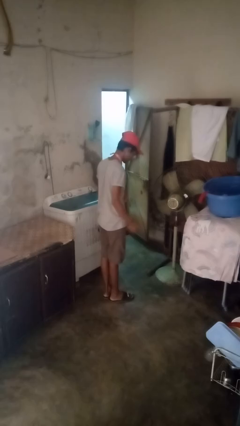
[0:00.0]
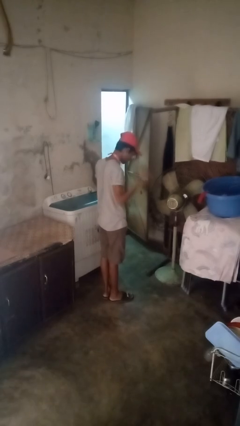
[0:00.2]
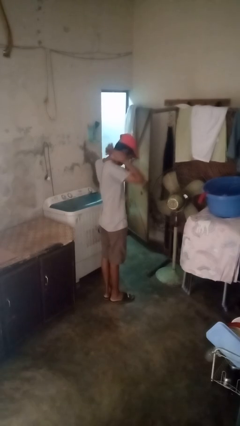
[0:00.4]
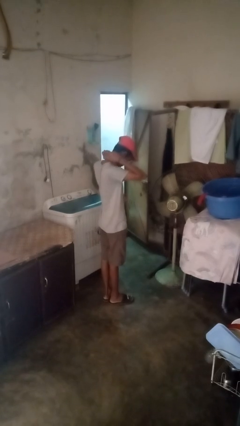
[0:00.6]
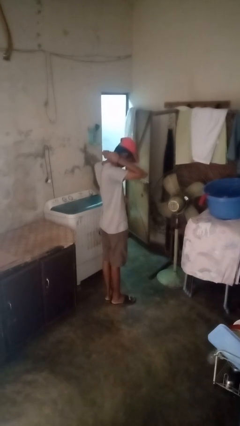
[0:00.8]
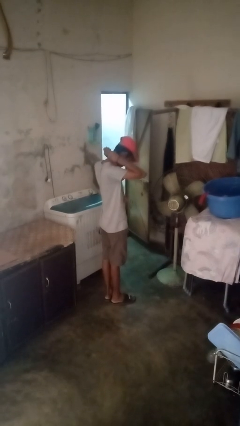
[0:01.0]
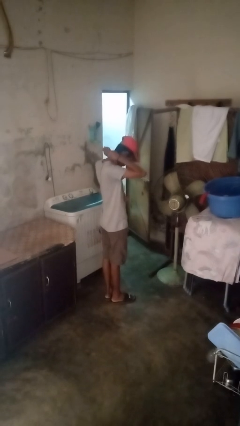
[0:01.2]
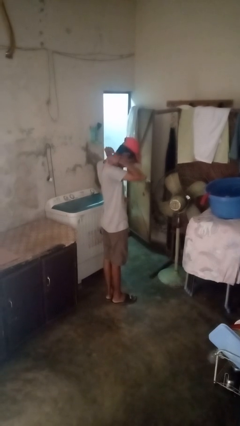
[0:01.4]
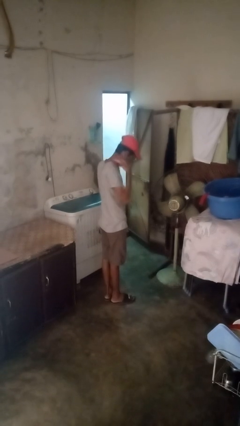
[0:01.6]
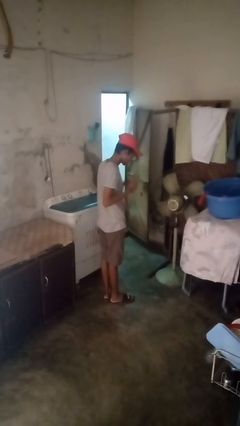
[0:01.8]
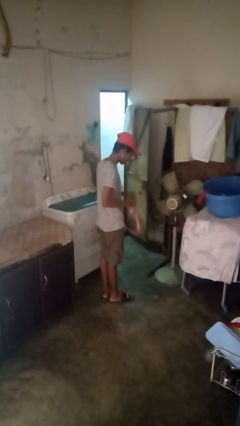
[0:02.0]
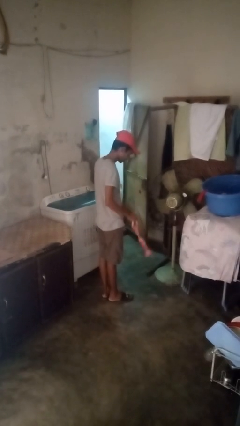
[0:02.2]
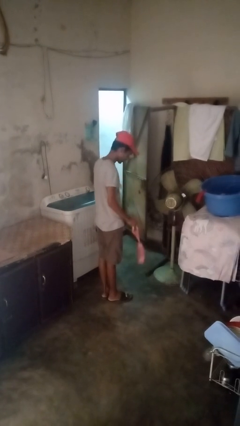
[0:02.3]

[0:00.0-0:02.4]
person takes off necktie

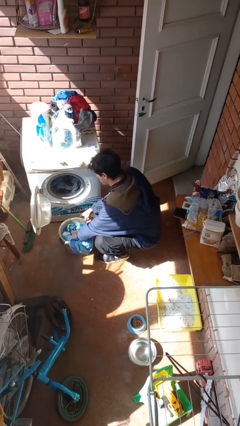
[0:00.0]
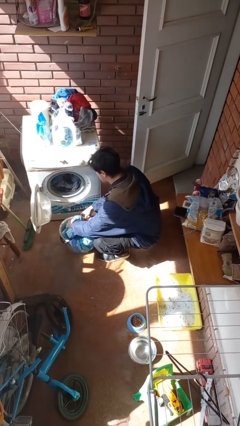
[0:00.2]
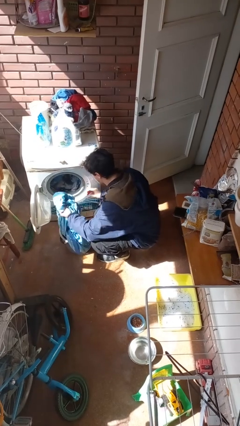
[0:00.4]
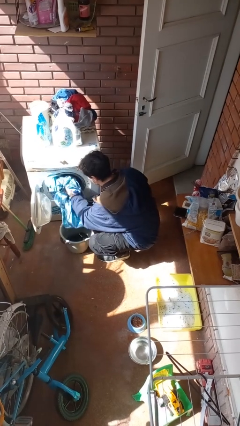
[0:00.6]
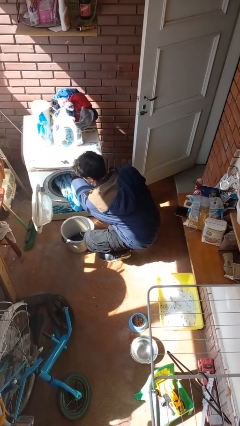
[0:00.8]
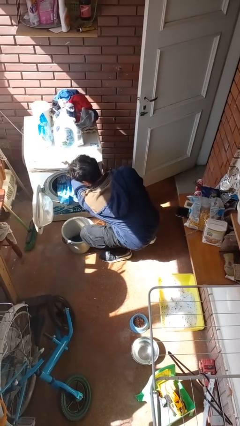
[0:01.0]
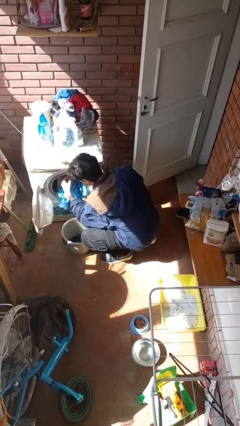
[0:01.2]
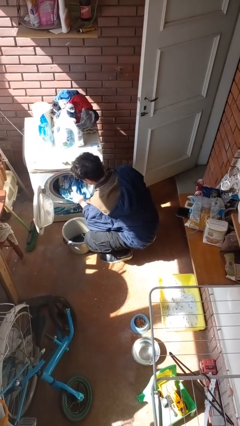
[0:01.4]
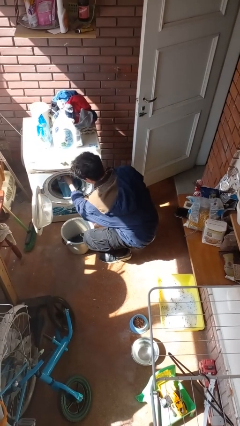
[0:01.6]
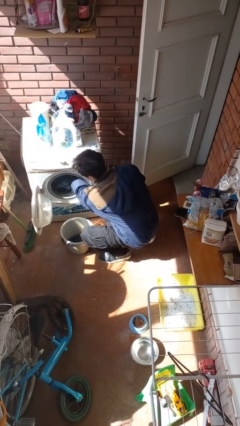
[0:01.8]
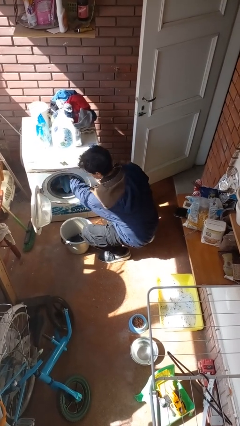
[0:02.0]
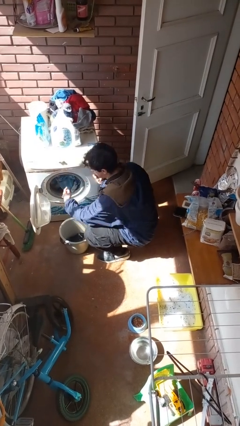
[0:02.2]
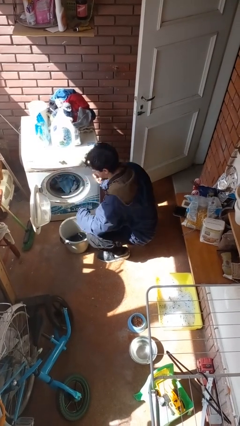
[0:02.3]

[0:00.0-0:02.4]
person loads clotheswasher

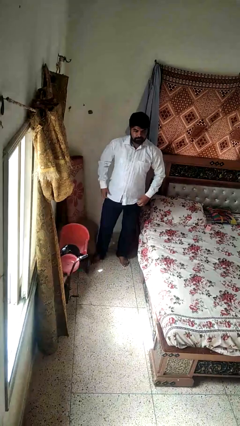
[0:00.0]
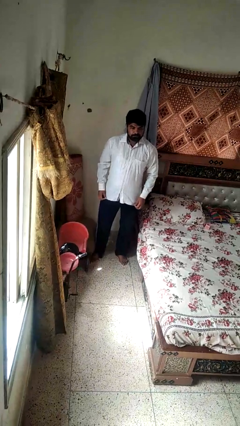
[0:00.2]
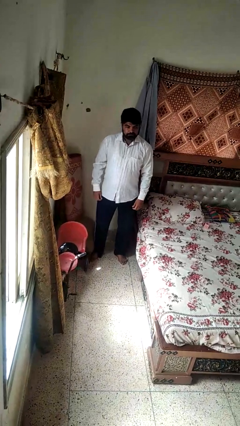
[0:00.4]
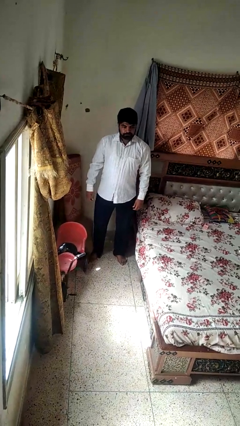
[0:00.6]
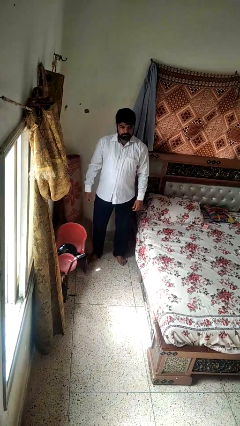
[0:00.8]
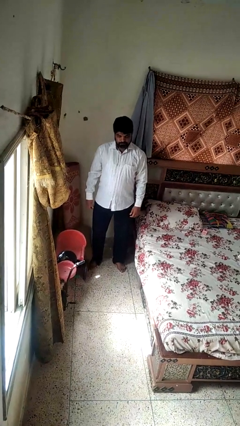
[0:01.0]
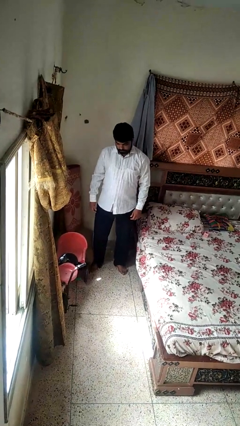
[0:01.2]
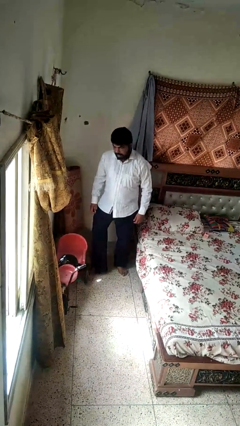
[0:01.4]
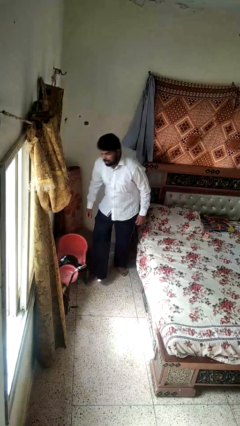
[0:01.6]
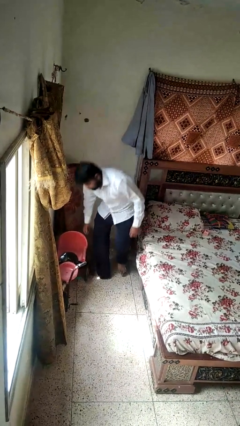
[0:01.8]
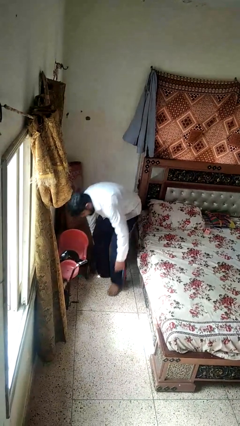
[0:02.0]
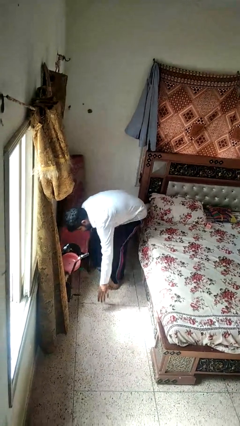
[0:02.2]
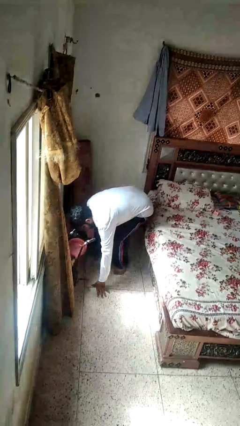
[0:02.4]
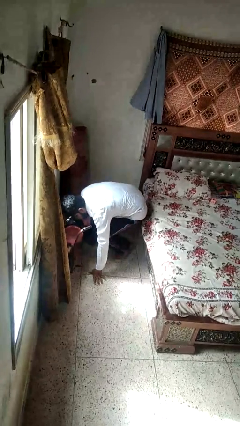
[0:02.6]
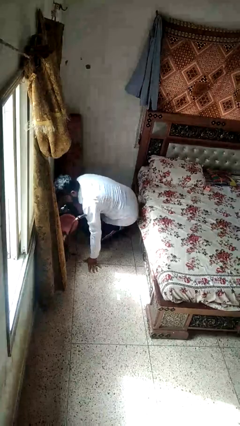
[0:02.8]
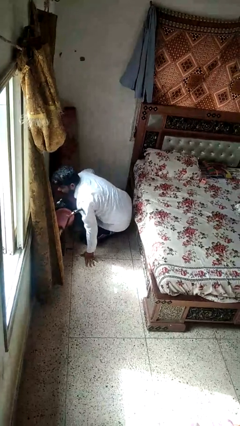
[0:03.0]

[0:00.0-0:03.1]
person trips on object on floor

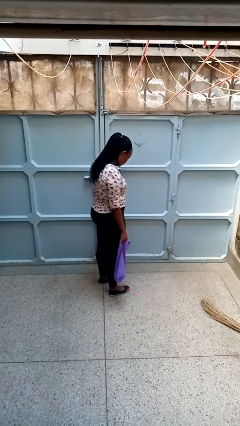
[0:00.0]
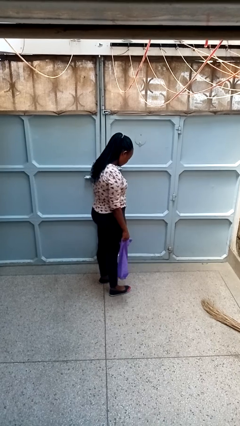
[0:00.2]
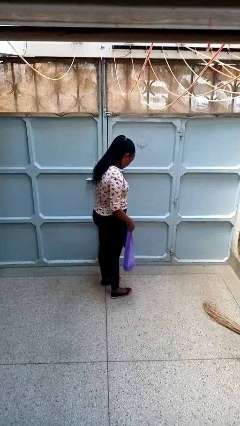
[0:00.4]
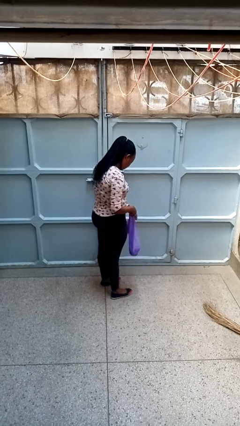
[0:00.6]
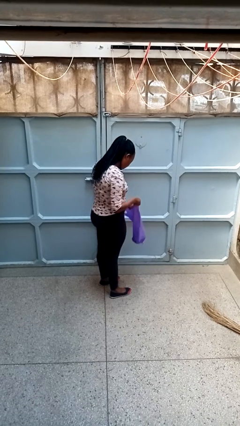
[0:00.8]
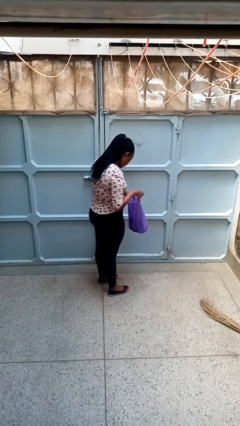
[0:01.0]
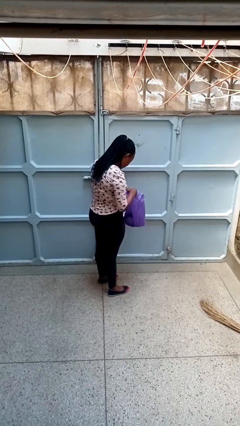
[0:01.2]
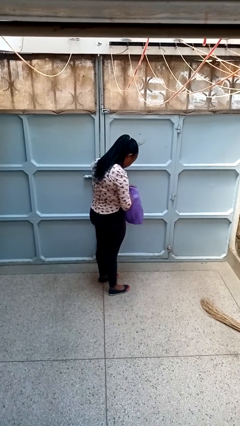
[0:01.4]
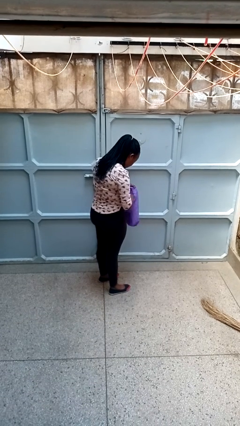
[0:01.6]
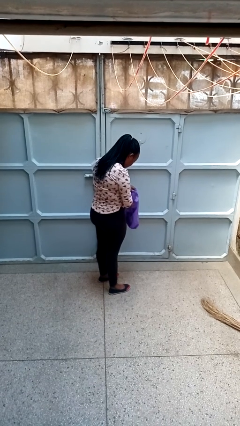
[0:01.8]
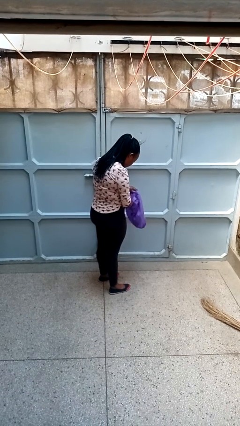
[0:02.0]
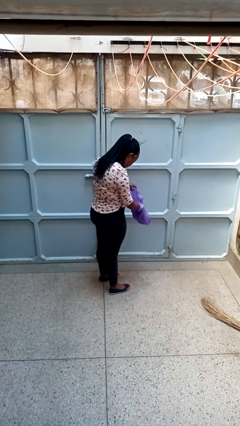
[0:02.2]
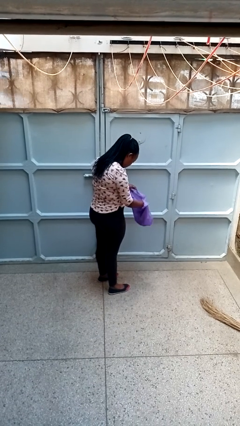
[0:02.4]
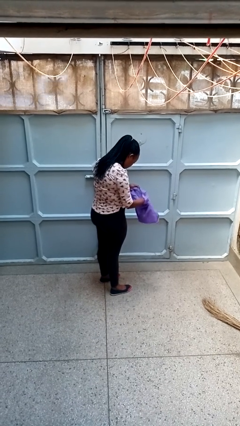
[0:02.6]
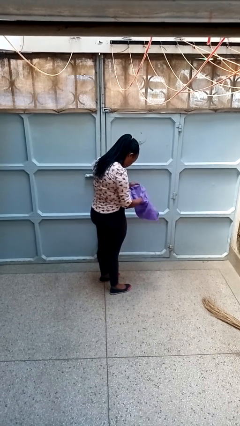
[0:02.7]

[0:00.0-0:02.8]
person searches in bag

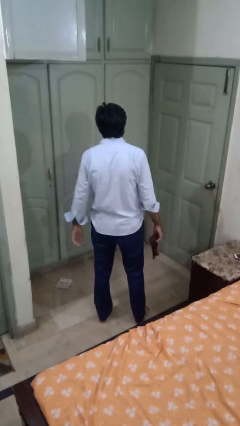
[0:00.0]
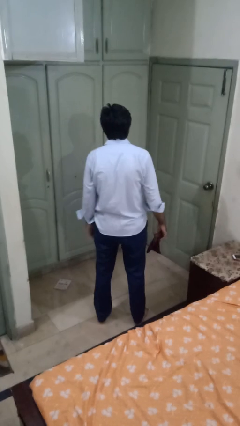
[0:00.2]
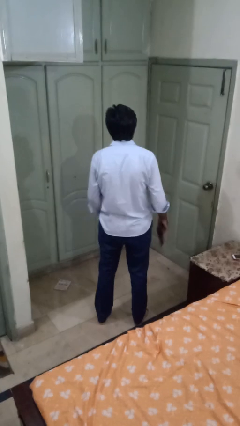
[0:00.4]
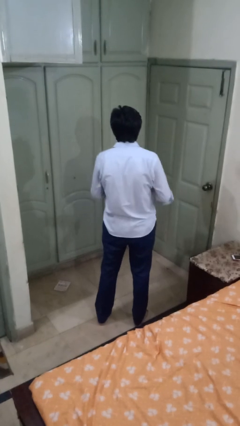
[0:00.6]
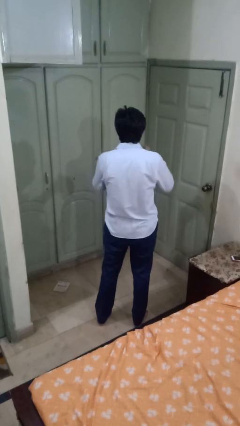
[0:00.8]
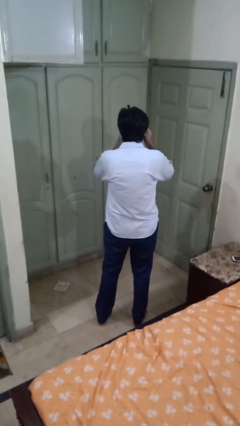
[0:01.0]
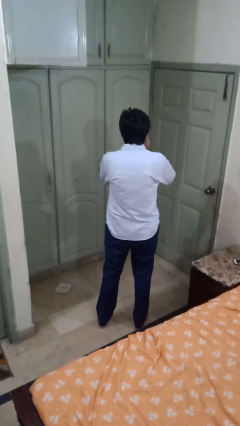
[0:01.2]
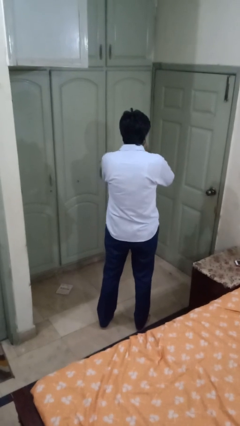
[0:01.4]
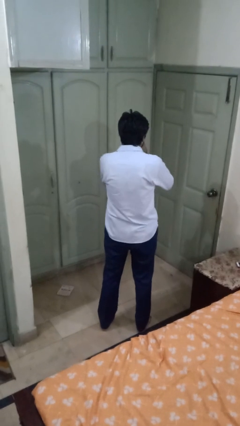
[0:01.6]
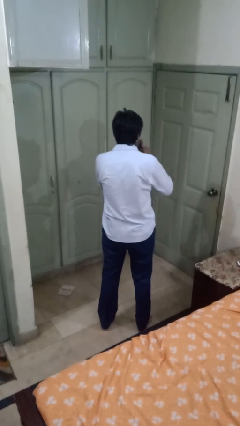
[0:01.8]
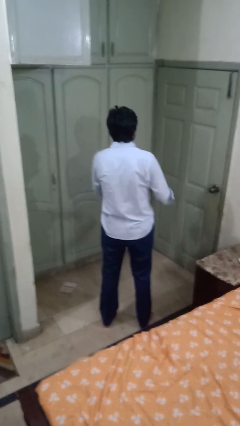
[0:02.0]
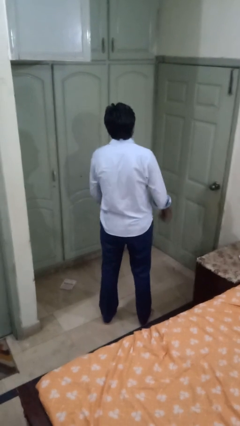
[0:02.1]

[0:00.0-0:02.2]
person blows nose

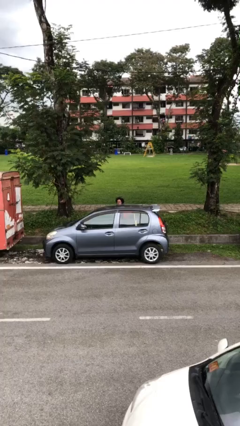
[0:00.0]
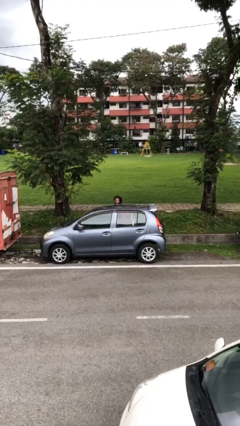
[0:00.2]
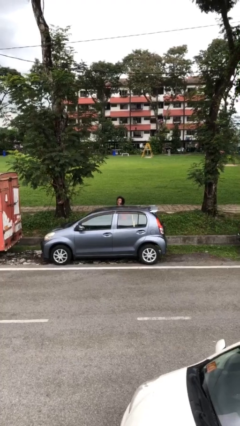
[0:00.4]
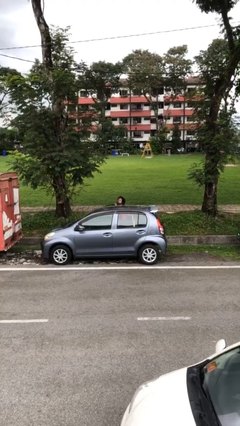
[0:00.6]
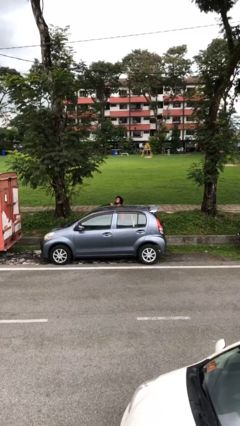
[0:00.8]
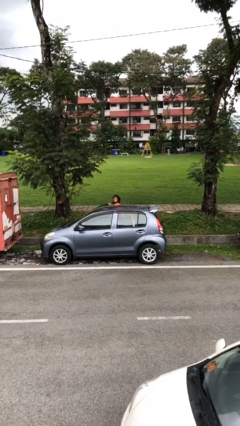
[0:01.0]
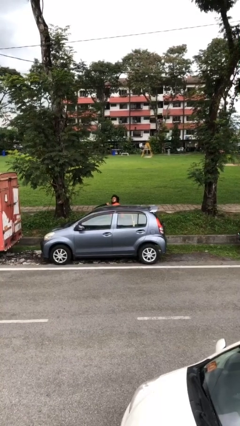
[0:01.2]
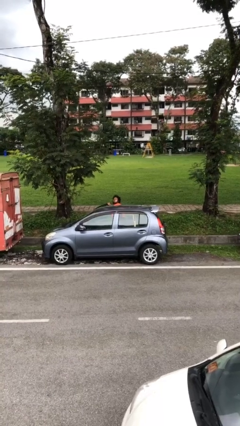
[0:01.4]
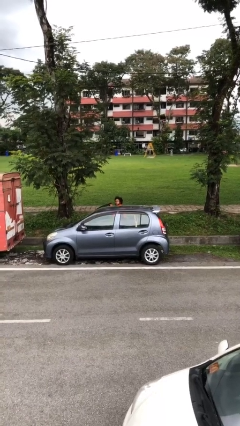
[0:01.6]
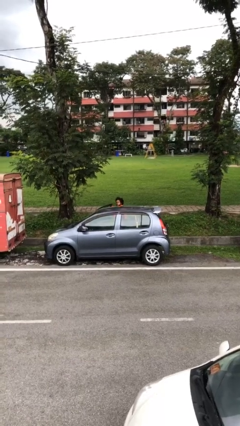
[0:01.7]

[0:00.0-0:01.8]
person opens car door

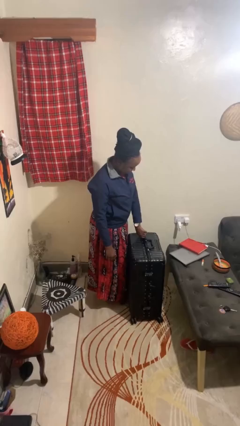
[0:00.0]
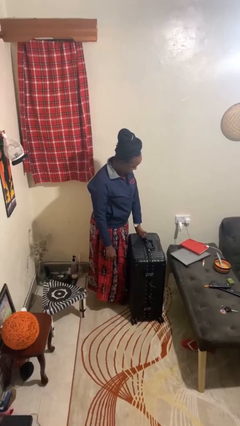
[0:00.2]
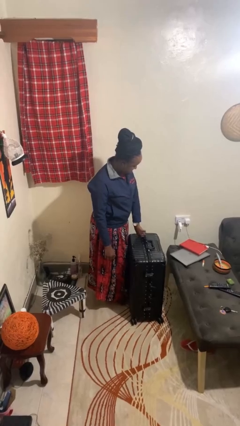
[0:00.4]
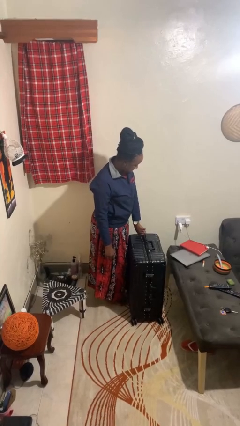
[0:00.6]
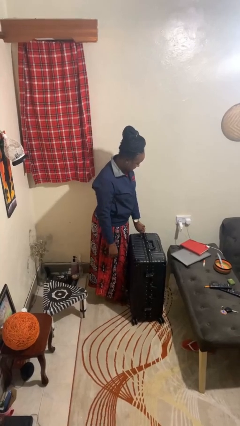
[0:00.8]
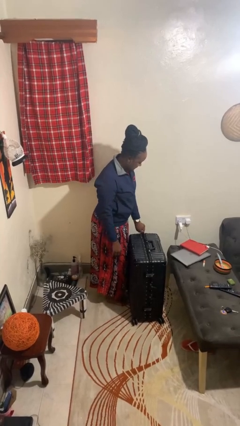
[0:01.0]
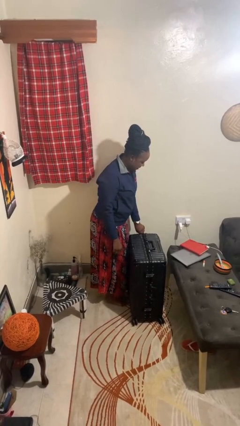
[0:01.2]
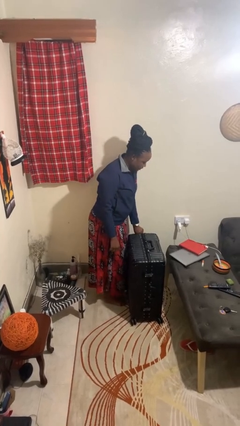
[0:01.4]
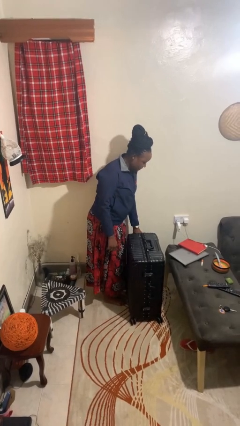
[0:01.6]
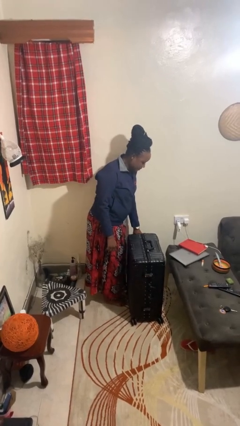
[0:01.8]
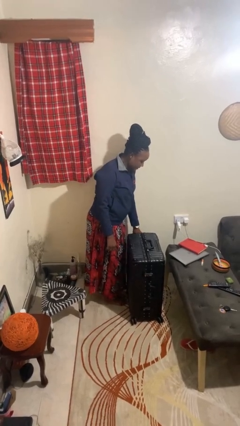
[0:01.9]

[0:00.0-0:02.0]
person closes suitcase

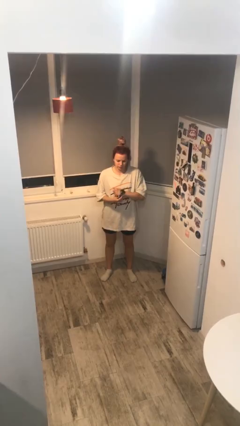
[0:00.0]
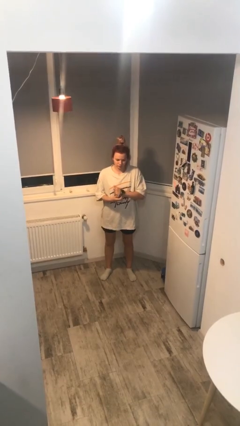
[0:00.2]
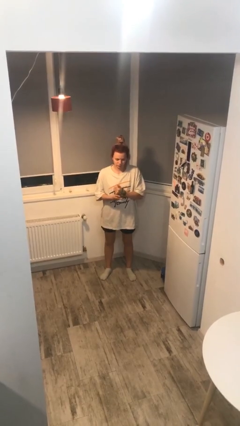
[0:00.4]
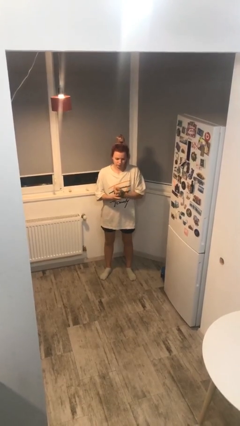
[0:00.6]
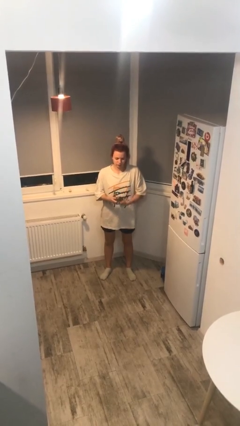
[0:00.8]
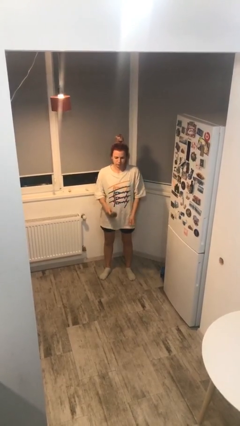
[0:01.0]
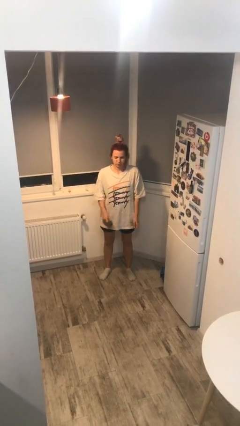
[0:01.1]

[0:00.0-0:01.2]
person takes off wristwatch
